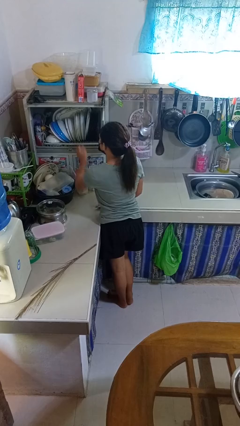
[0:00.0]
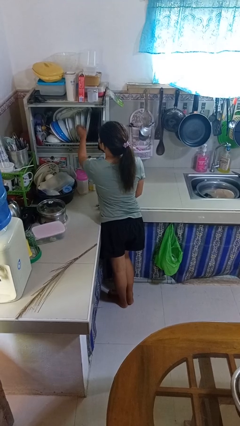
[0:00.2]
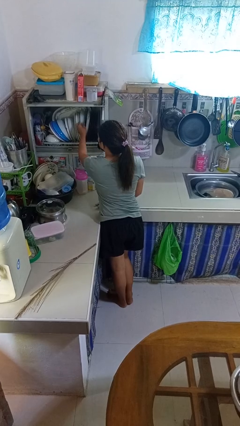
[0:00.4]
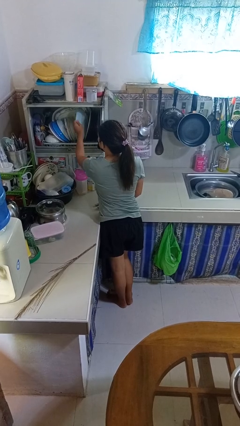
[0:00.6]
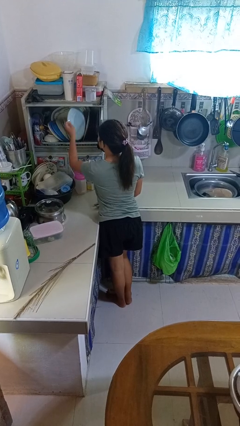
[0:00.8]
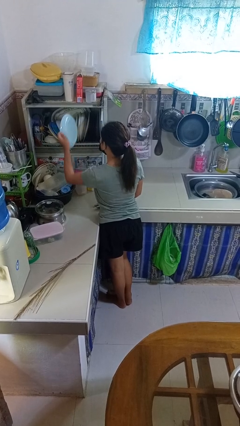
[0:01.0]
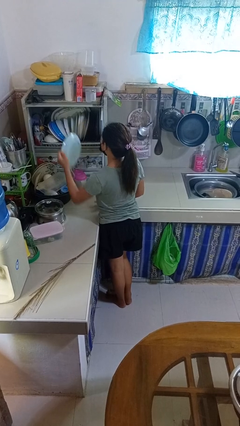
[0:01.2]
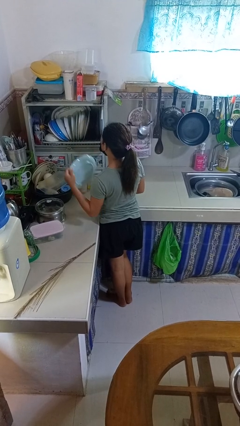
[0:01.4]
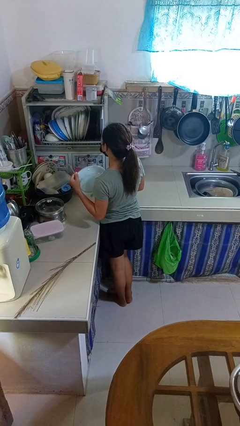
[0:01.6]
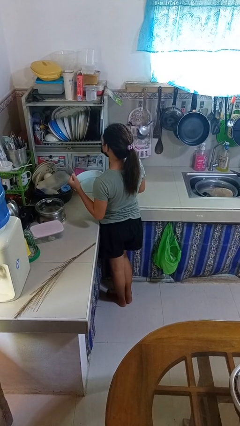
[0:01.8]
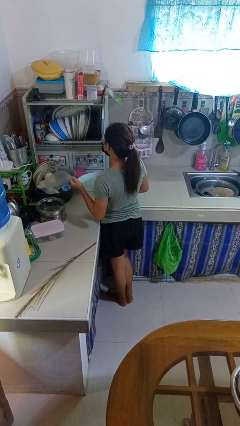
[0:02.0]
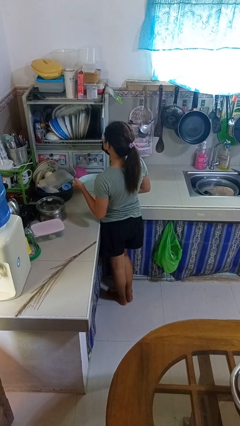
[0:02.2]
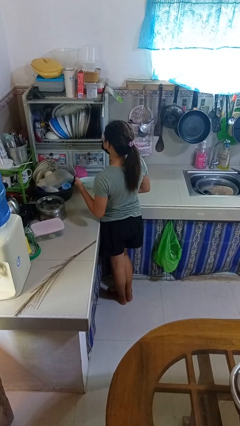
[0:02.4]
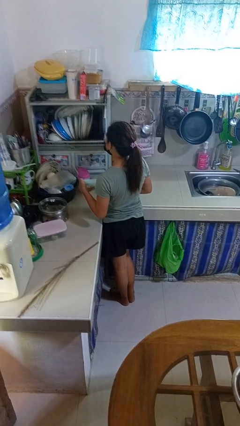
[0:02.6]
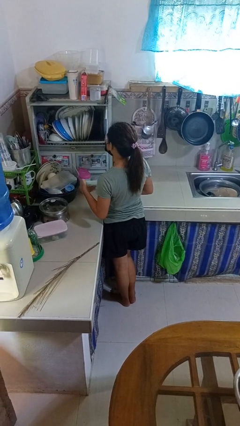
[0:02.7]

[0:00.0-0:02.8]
person takes object from kitchen drawer

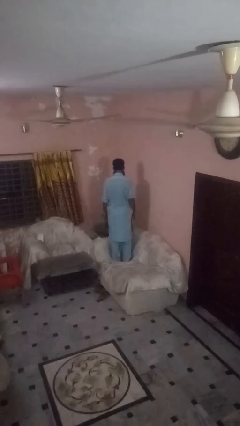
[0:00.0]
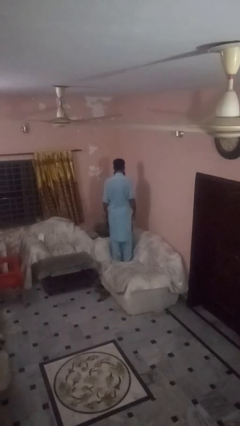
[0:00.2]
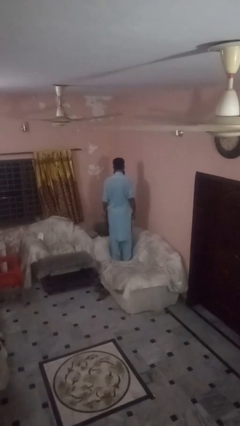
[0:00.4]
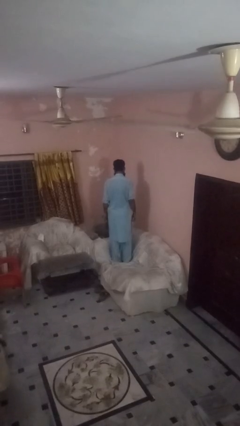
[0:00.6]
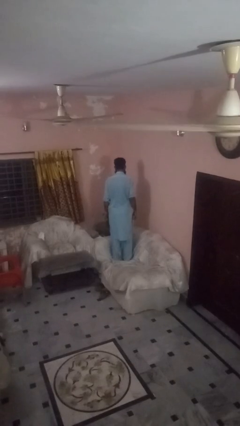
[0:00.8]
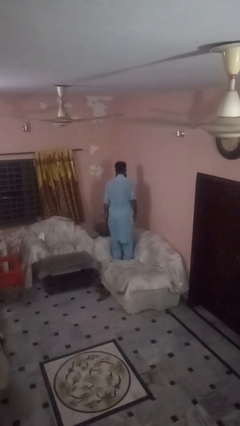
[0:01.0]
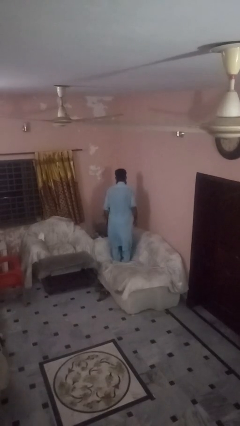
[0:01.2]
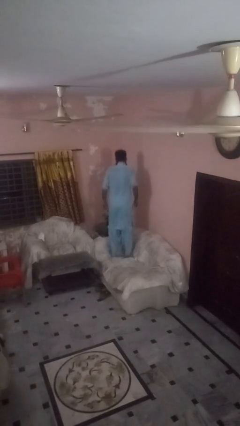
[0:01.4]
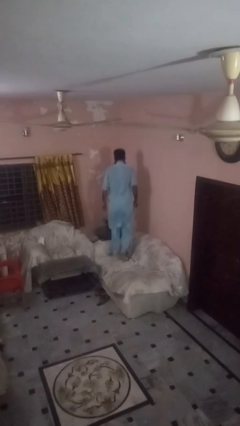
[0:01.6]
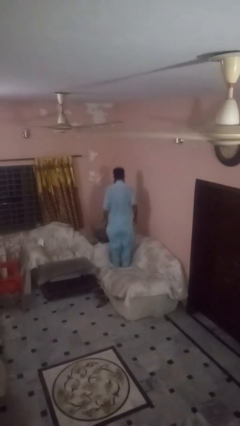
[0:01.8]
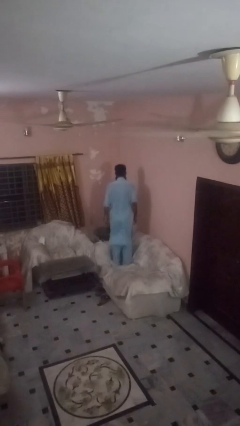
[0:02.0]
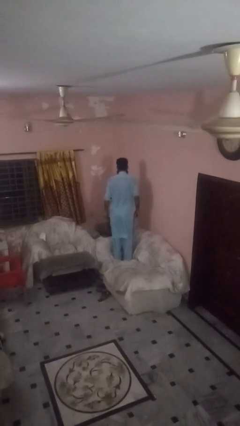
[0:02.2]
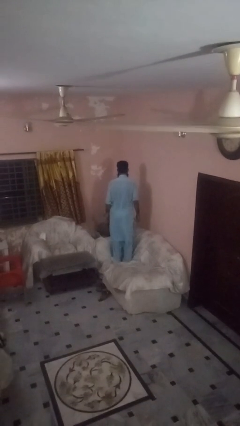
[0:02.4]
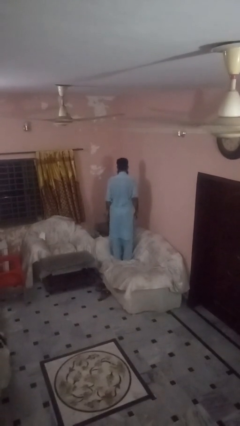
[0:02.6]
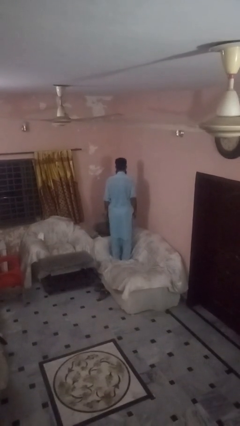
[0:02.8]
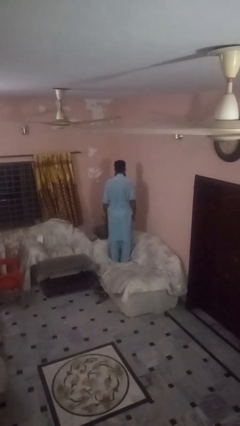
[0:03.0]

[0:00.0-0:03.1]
person jumps on couch

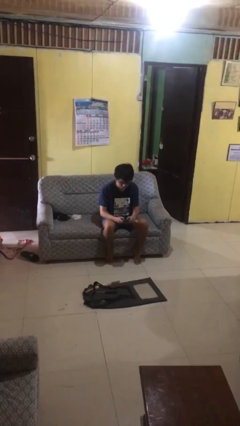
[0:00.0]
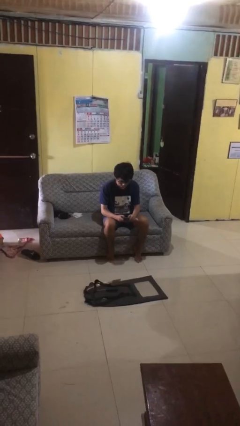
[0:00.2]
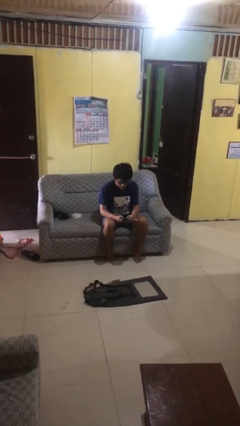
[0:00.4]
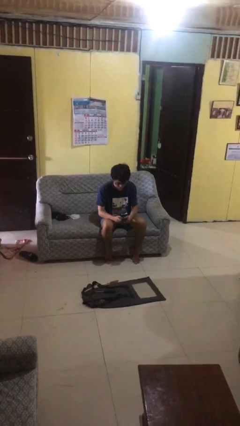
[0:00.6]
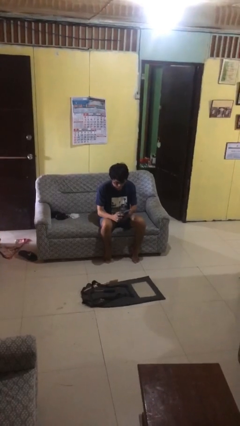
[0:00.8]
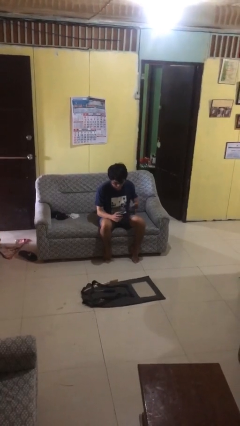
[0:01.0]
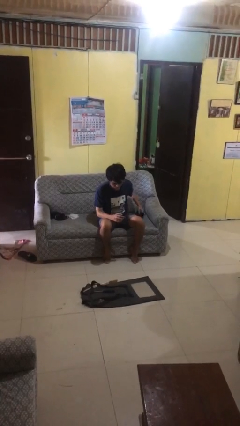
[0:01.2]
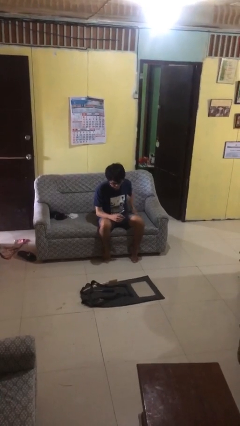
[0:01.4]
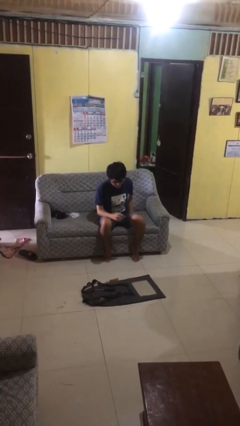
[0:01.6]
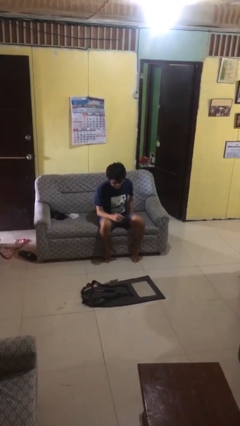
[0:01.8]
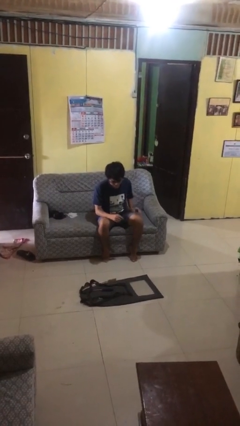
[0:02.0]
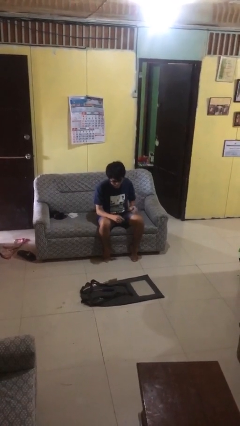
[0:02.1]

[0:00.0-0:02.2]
person puts phone into pocket

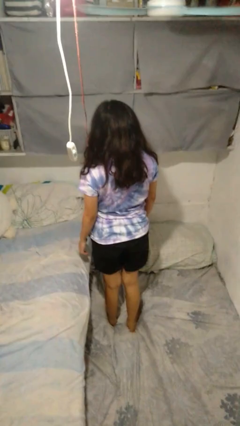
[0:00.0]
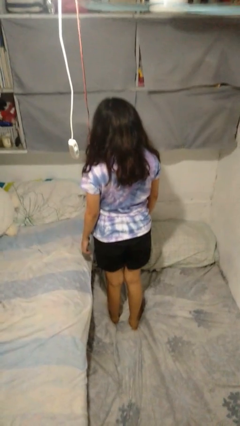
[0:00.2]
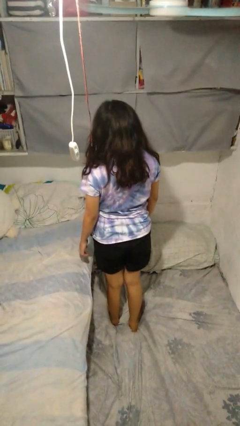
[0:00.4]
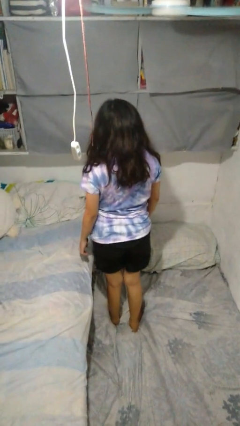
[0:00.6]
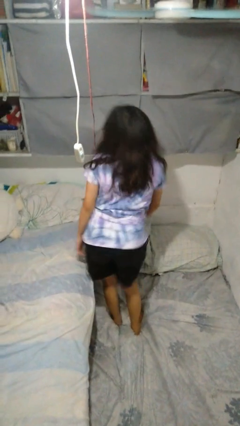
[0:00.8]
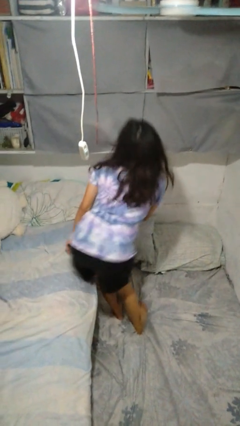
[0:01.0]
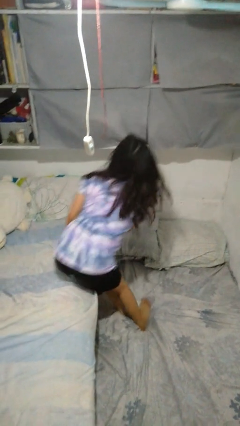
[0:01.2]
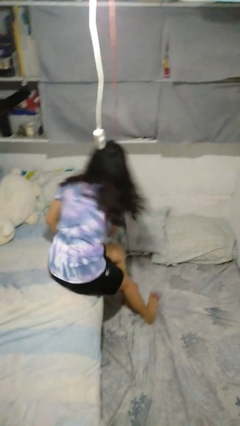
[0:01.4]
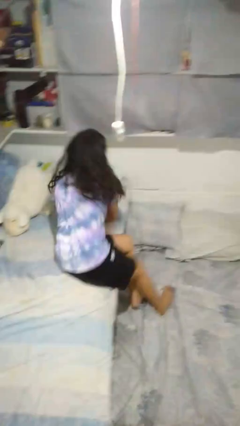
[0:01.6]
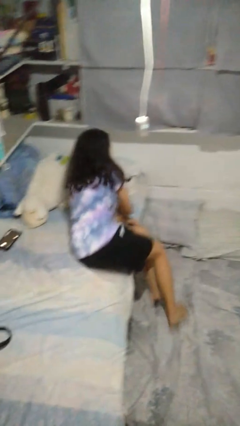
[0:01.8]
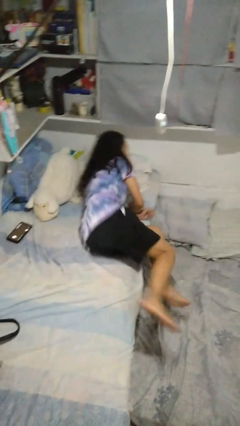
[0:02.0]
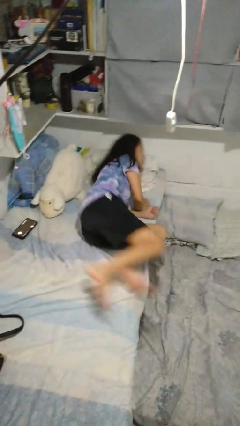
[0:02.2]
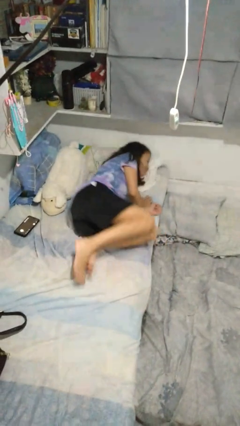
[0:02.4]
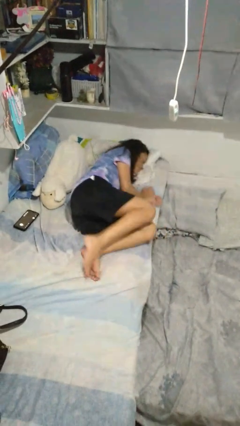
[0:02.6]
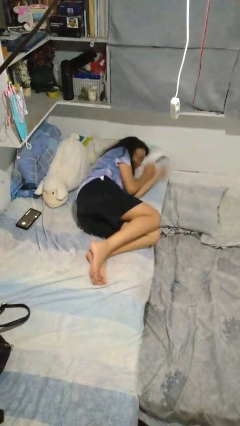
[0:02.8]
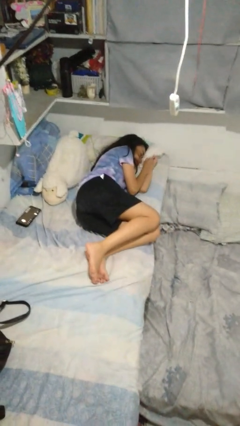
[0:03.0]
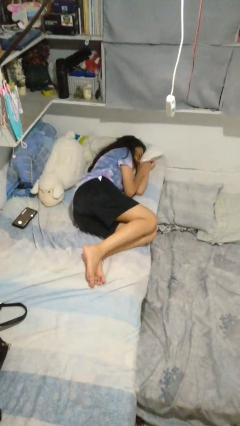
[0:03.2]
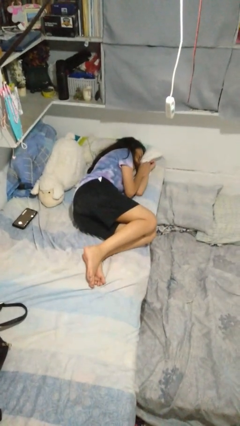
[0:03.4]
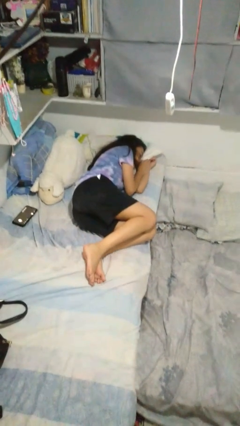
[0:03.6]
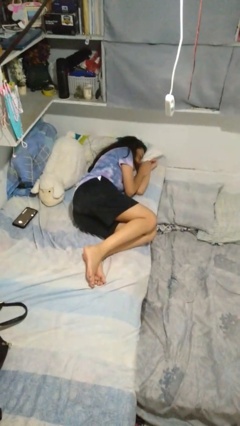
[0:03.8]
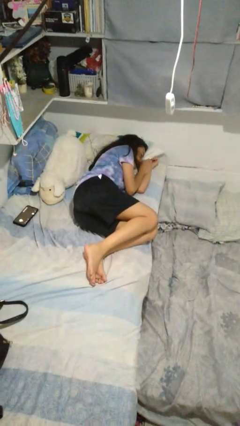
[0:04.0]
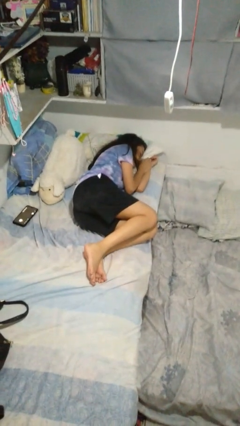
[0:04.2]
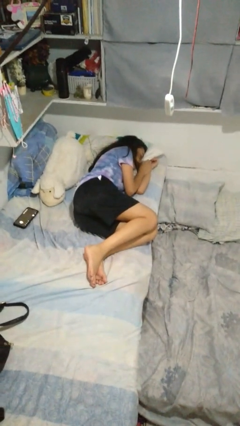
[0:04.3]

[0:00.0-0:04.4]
person lies down on bed

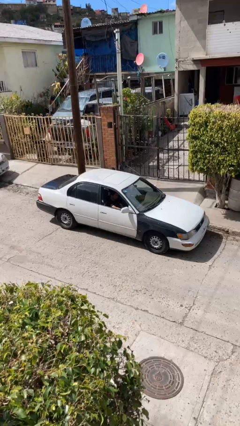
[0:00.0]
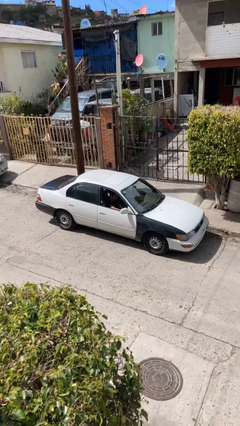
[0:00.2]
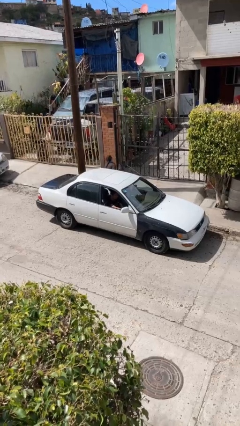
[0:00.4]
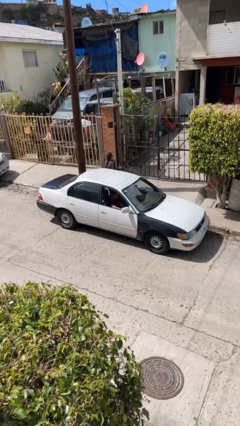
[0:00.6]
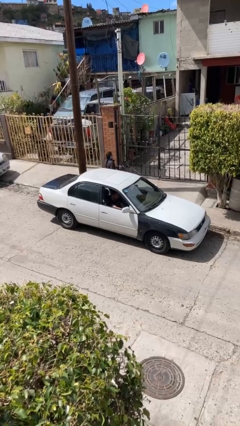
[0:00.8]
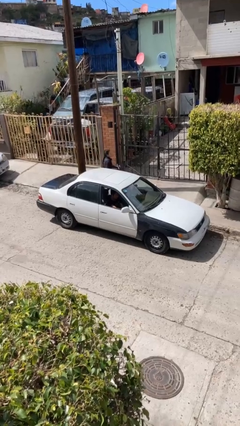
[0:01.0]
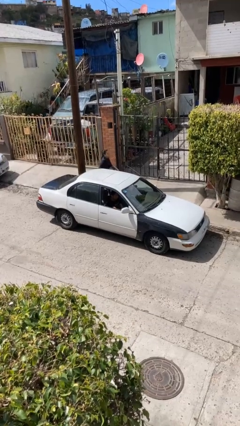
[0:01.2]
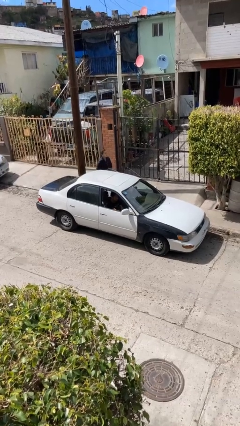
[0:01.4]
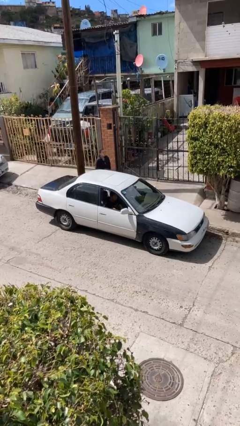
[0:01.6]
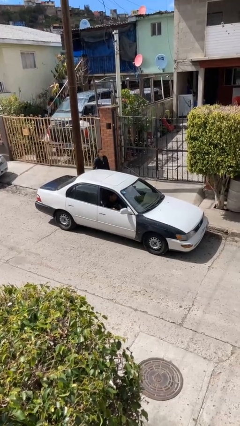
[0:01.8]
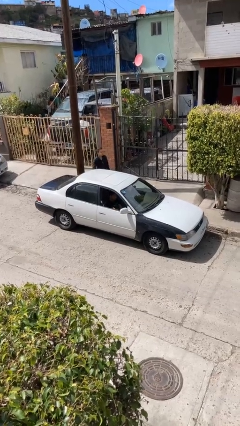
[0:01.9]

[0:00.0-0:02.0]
car drops off person

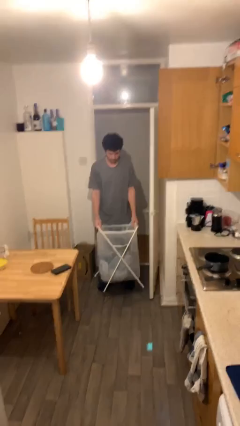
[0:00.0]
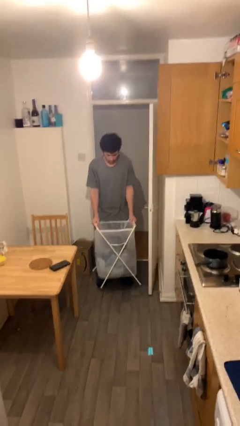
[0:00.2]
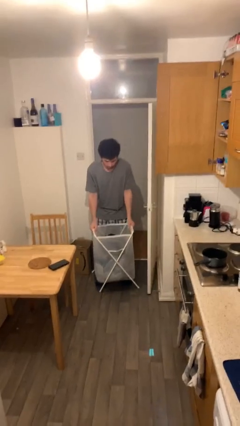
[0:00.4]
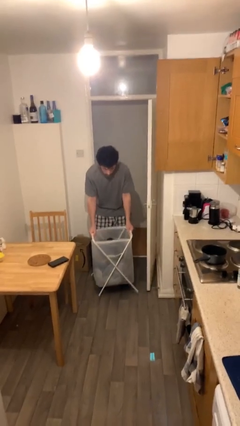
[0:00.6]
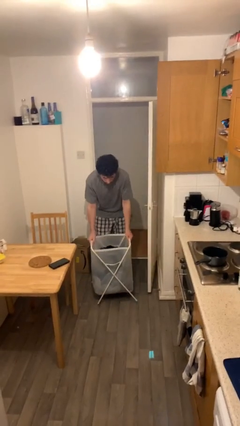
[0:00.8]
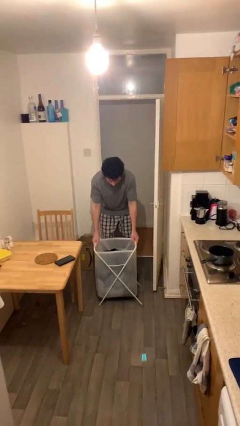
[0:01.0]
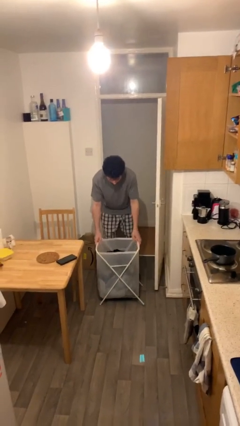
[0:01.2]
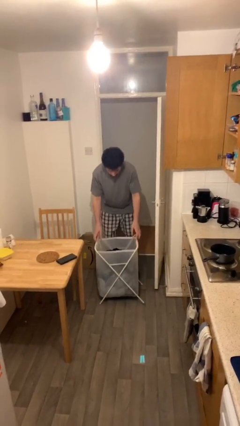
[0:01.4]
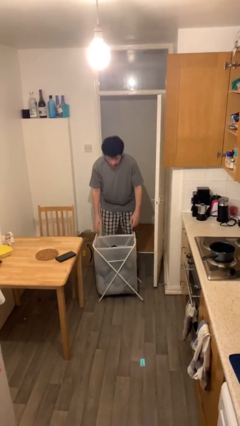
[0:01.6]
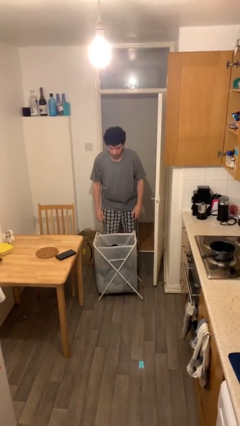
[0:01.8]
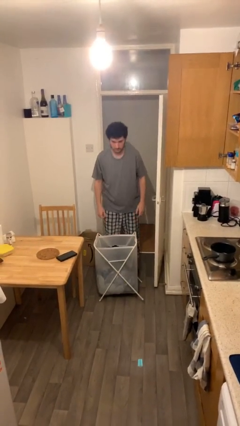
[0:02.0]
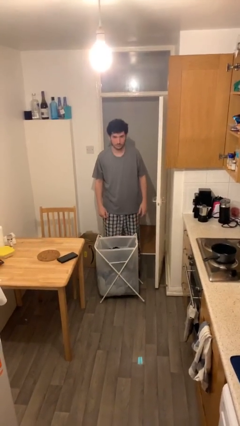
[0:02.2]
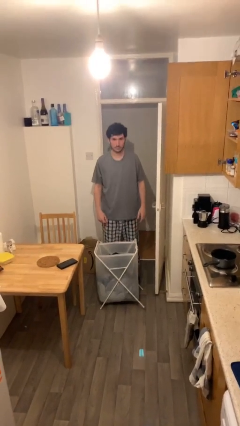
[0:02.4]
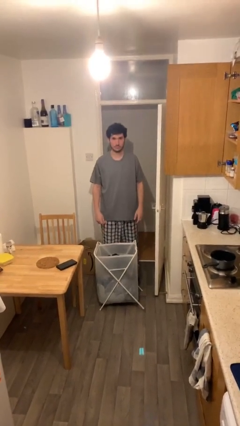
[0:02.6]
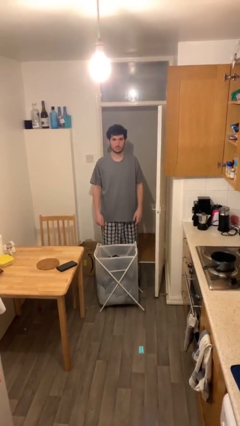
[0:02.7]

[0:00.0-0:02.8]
person puts down object on floor
